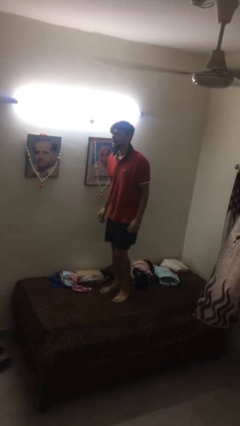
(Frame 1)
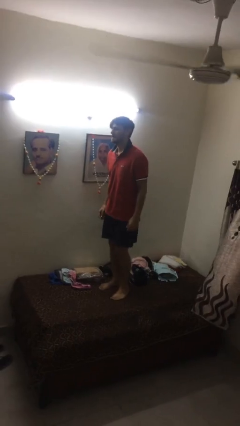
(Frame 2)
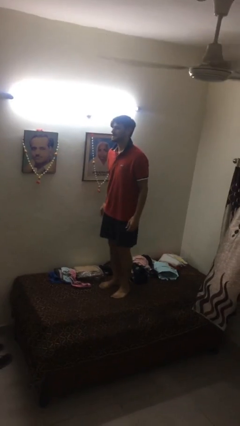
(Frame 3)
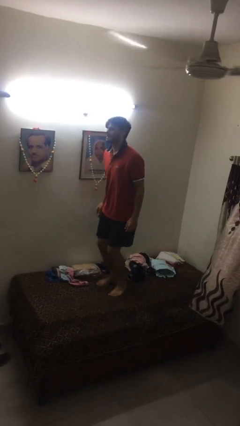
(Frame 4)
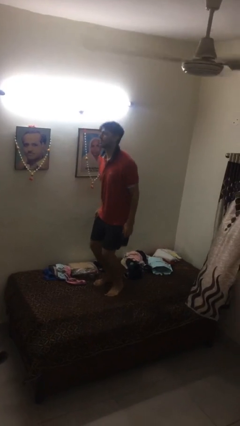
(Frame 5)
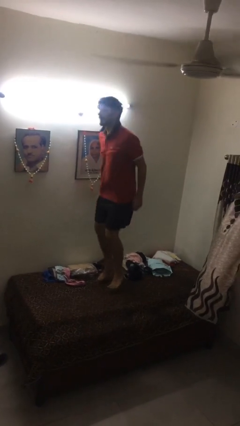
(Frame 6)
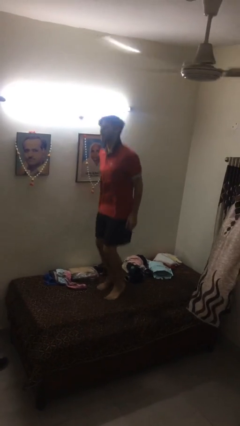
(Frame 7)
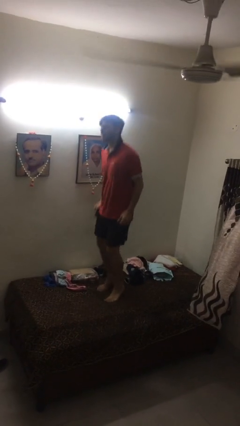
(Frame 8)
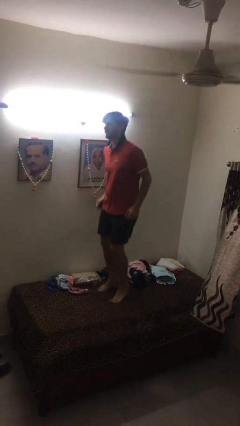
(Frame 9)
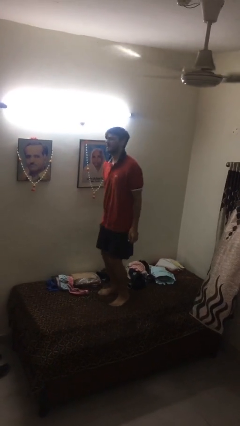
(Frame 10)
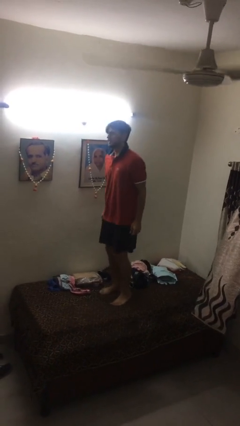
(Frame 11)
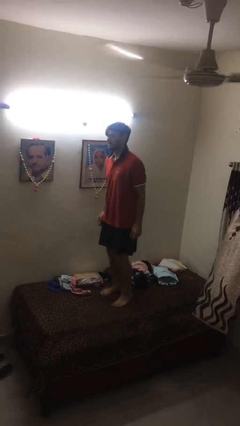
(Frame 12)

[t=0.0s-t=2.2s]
person jumps on bed

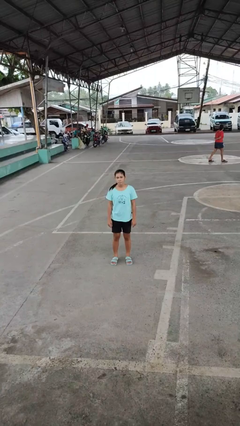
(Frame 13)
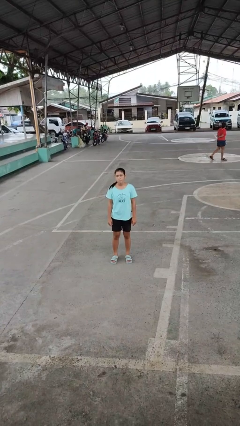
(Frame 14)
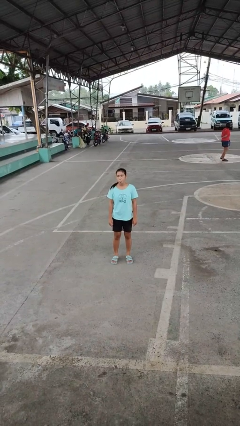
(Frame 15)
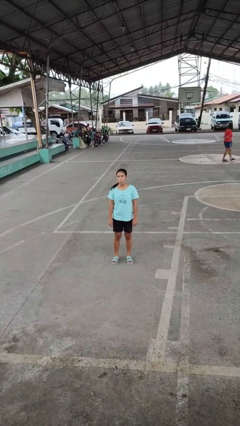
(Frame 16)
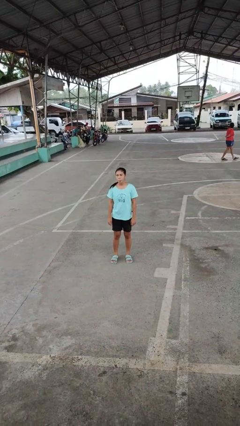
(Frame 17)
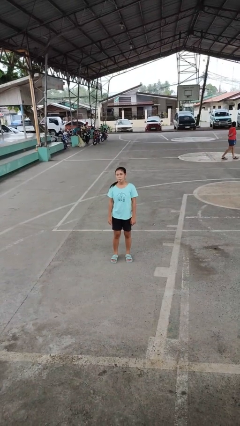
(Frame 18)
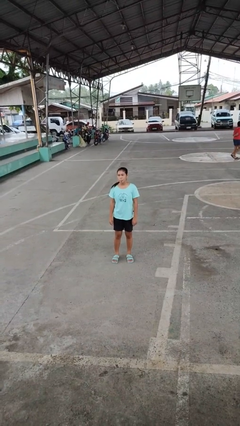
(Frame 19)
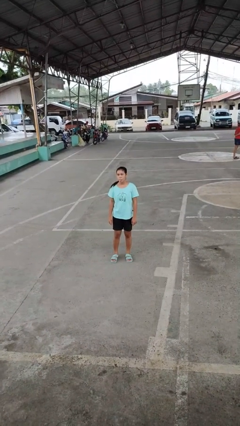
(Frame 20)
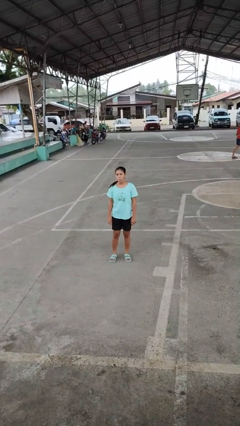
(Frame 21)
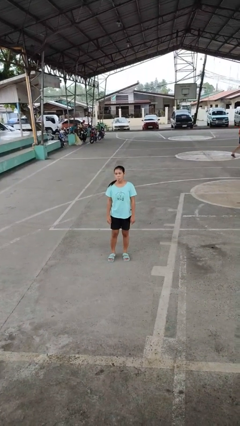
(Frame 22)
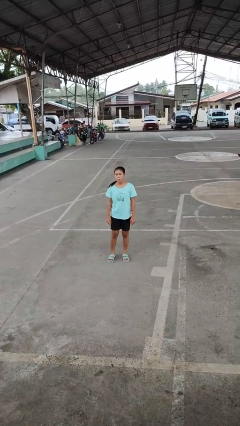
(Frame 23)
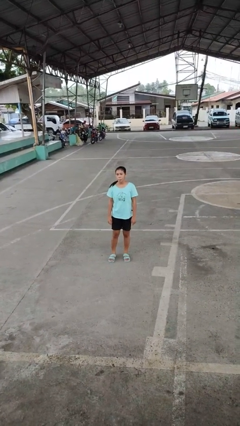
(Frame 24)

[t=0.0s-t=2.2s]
person sticks out tongue

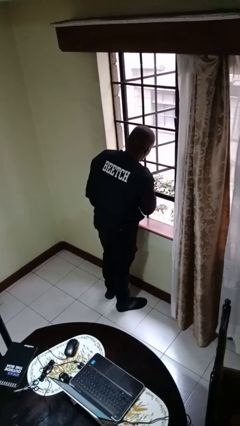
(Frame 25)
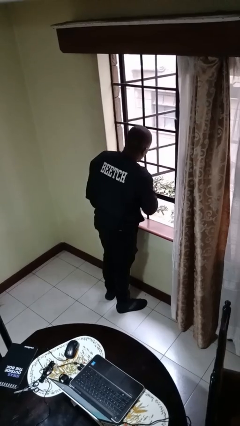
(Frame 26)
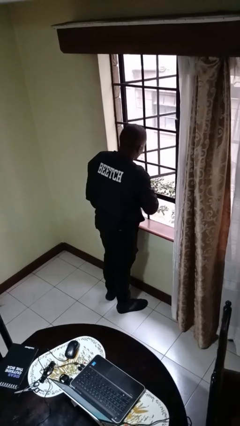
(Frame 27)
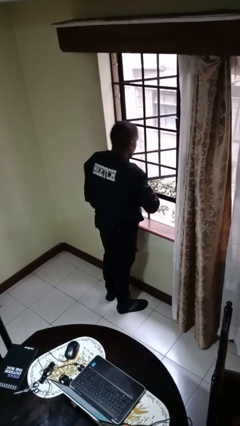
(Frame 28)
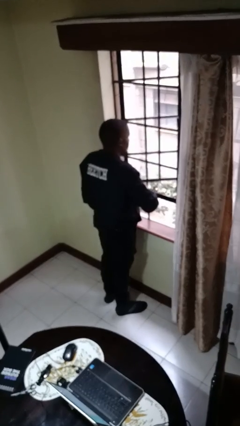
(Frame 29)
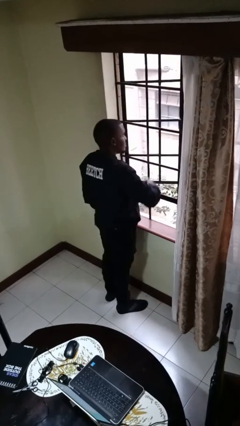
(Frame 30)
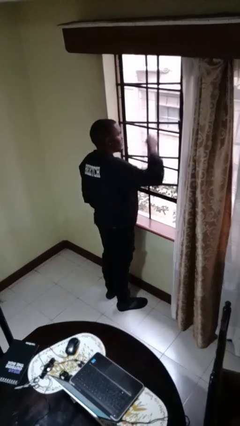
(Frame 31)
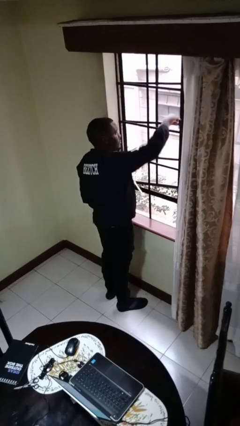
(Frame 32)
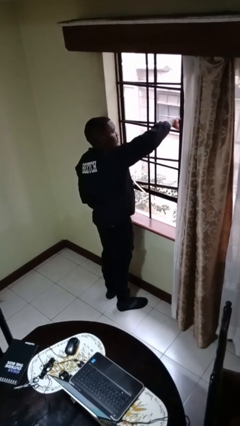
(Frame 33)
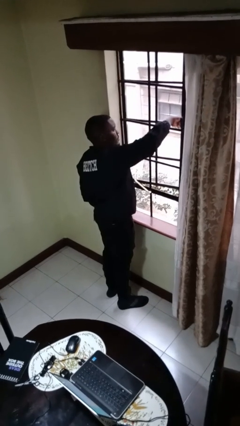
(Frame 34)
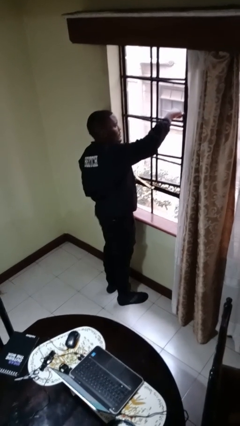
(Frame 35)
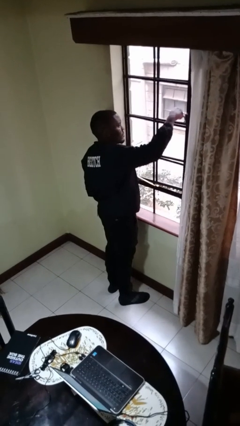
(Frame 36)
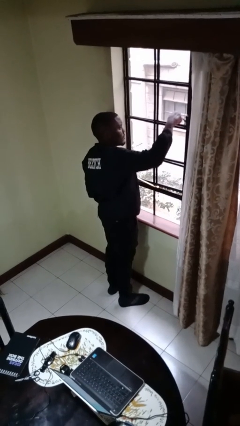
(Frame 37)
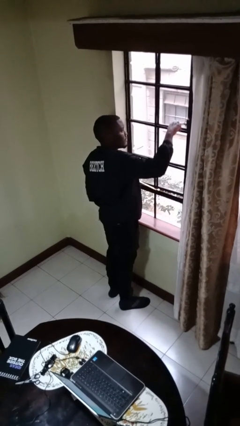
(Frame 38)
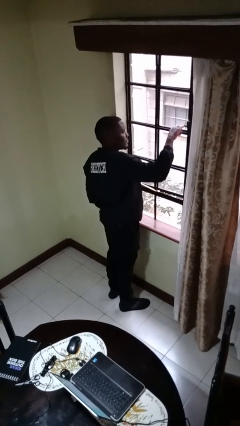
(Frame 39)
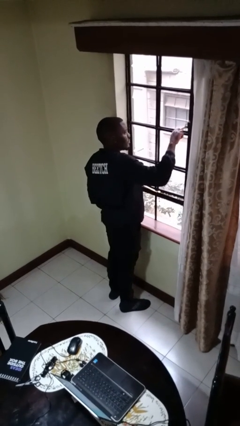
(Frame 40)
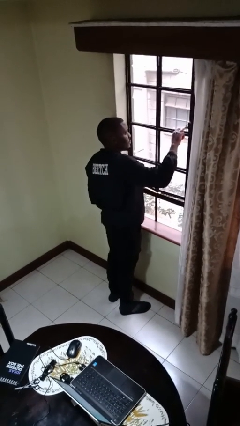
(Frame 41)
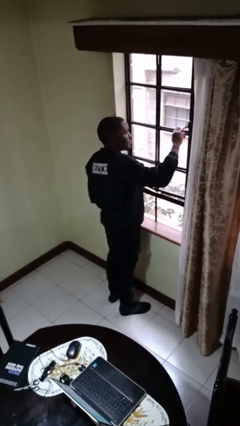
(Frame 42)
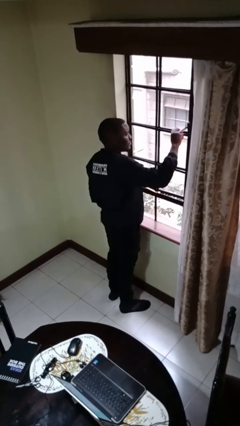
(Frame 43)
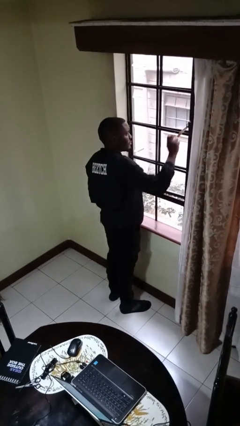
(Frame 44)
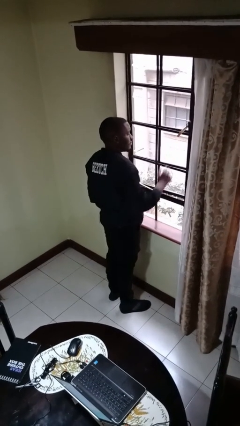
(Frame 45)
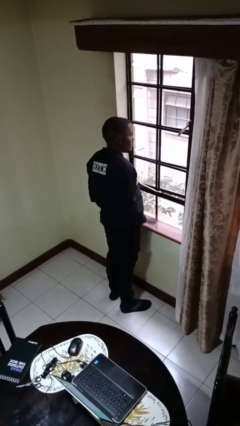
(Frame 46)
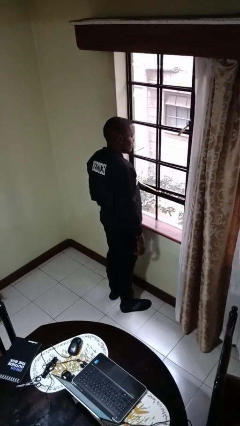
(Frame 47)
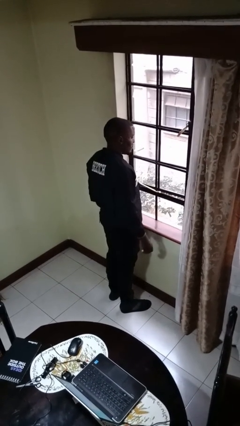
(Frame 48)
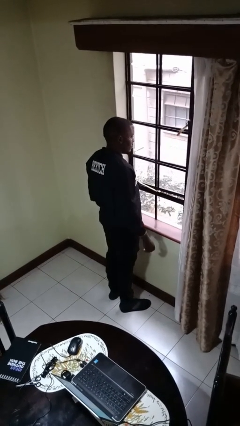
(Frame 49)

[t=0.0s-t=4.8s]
person closes home window

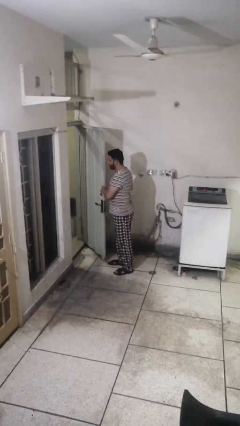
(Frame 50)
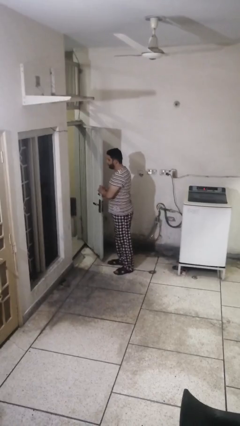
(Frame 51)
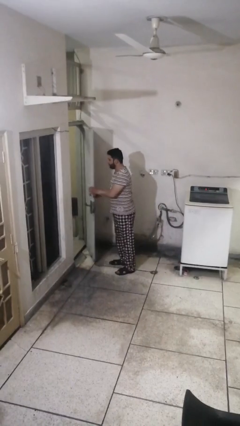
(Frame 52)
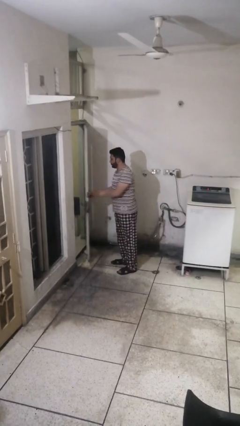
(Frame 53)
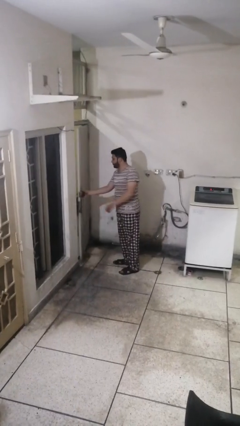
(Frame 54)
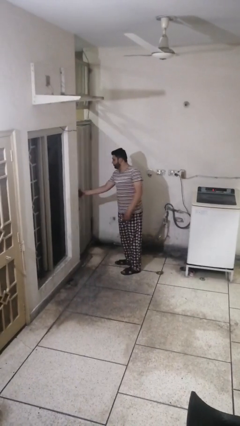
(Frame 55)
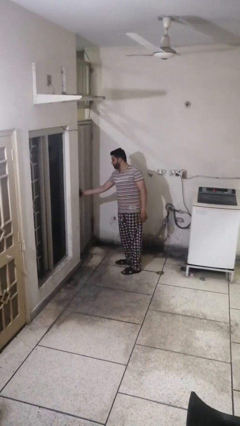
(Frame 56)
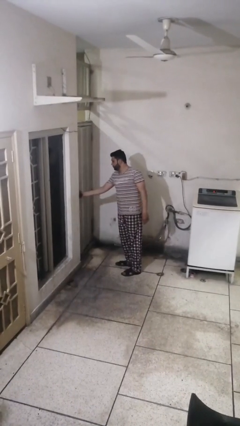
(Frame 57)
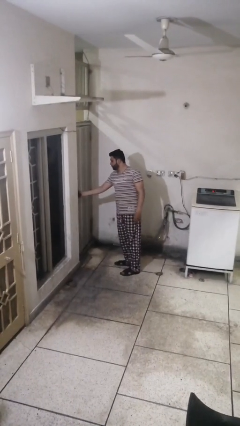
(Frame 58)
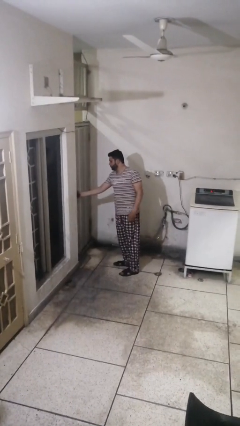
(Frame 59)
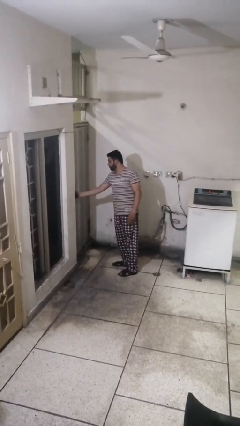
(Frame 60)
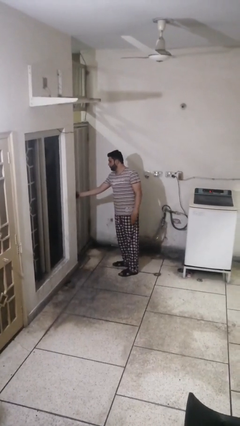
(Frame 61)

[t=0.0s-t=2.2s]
person closes facility door

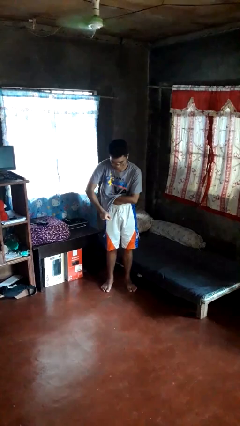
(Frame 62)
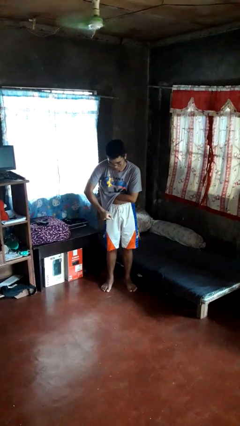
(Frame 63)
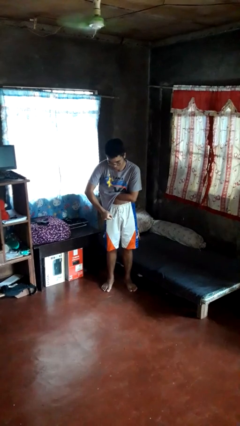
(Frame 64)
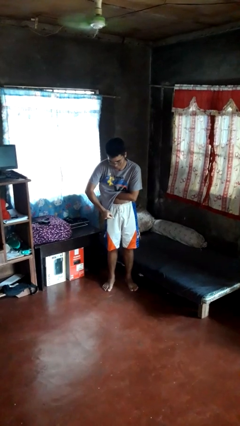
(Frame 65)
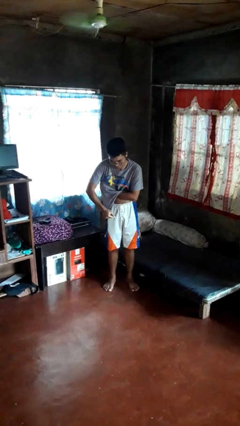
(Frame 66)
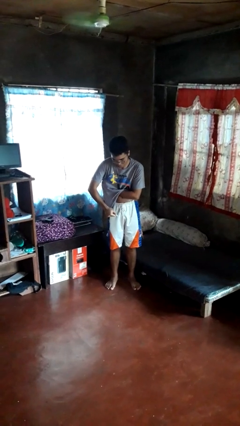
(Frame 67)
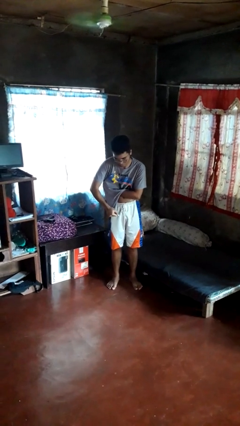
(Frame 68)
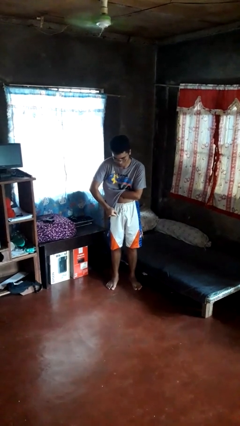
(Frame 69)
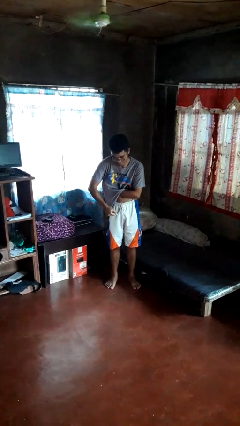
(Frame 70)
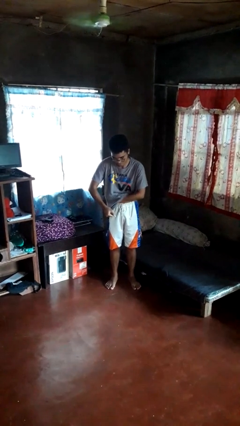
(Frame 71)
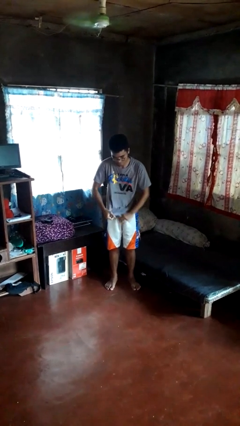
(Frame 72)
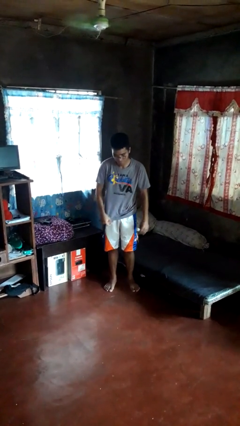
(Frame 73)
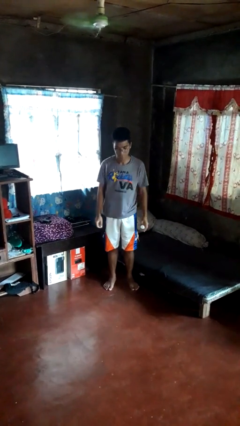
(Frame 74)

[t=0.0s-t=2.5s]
person applies deodorant

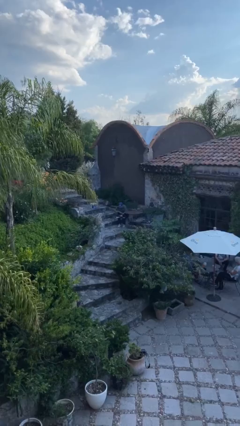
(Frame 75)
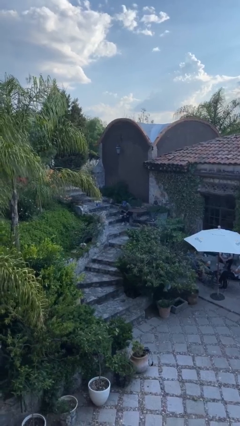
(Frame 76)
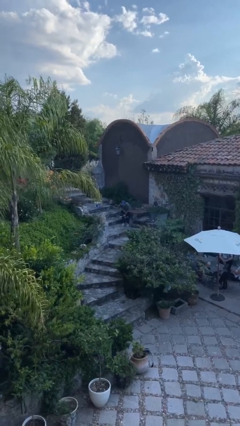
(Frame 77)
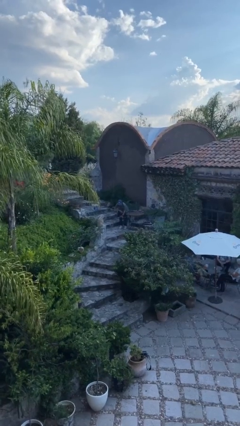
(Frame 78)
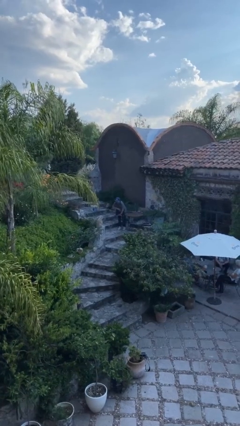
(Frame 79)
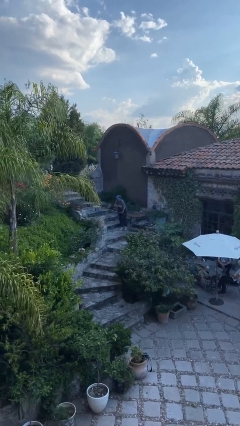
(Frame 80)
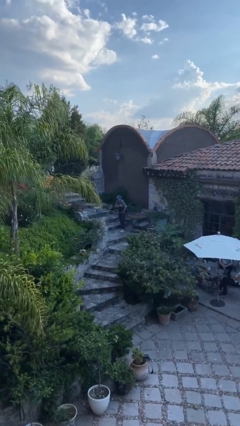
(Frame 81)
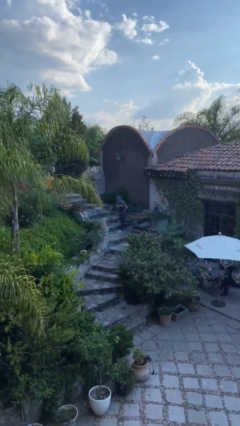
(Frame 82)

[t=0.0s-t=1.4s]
person stands up

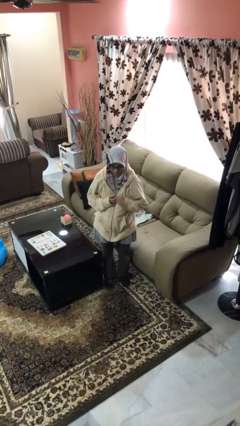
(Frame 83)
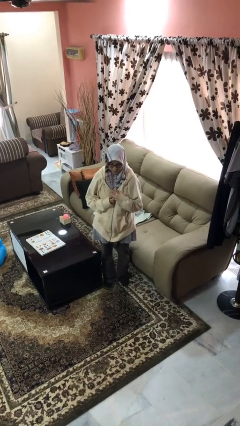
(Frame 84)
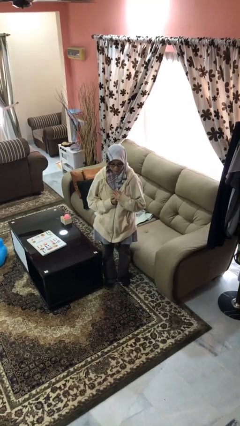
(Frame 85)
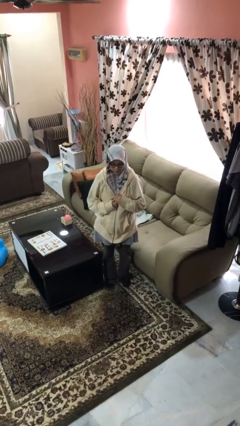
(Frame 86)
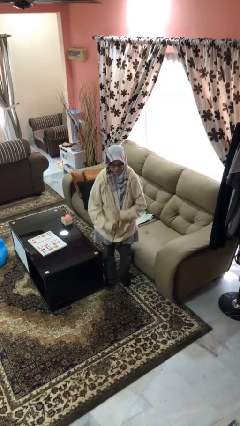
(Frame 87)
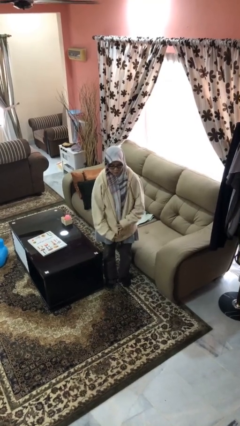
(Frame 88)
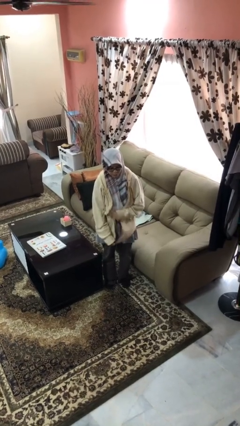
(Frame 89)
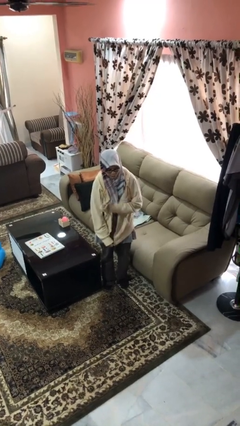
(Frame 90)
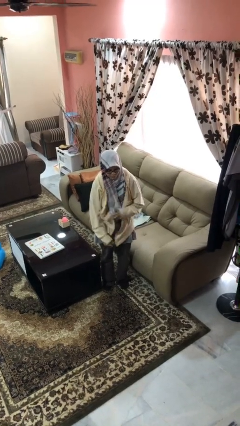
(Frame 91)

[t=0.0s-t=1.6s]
person unzips jacket
